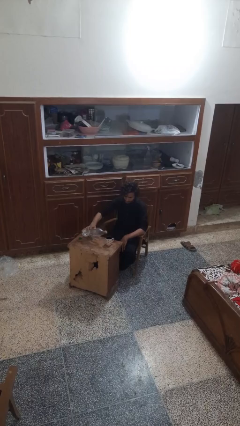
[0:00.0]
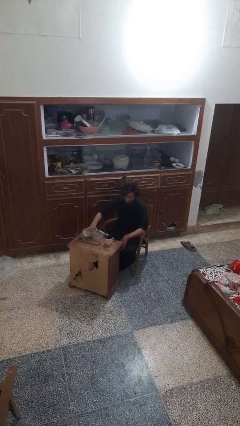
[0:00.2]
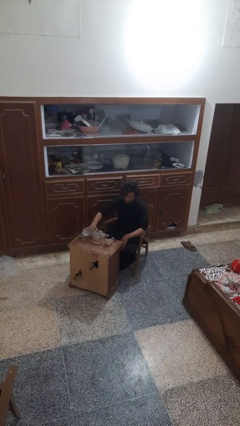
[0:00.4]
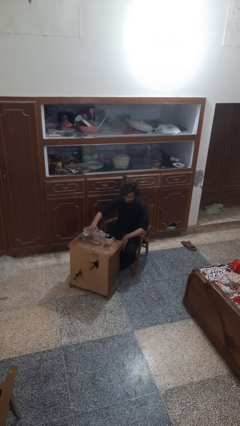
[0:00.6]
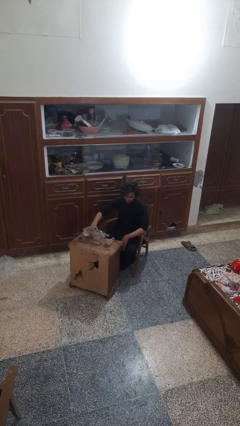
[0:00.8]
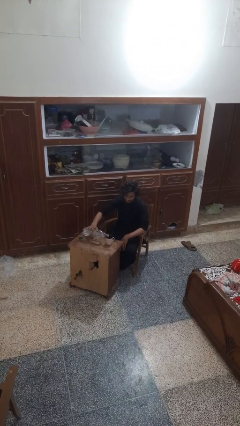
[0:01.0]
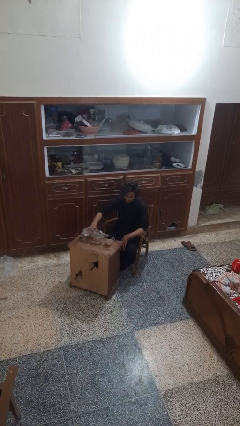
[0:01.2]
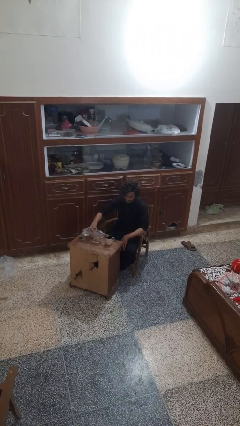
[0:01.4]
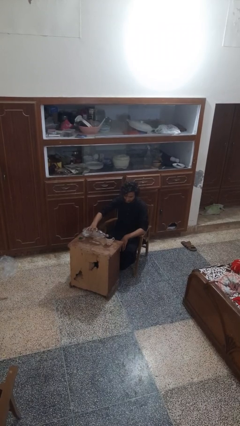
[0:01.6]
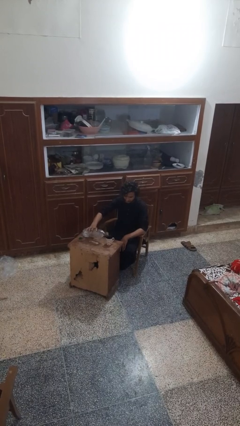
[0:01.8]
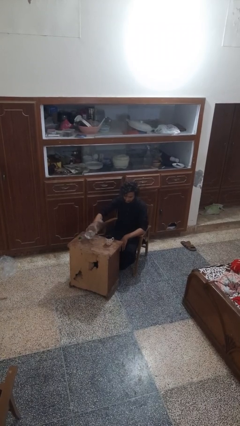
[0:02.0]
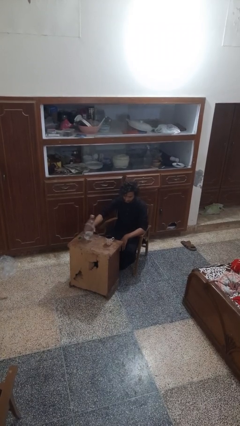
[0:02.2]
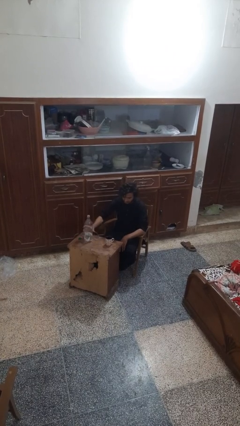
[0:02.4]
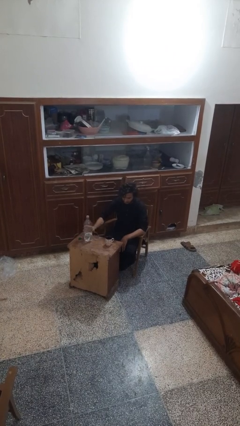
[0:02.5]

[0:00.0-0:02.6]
person pours liquid into cup

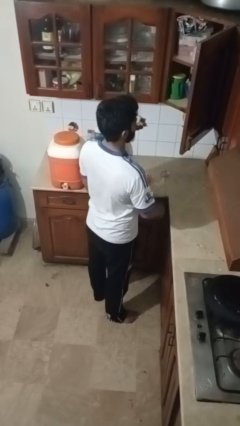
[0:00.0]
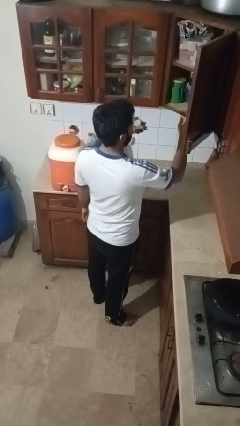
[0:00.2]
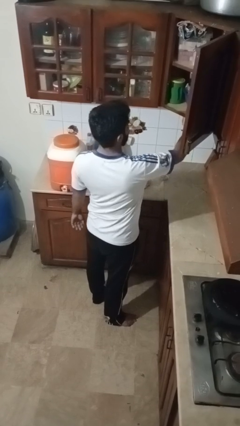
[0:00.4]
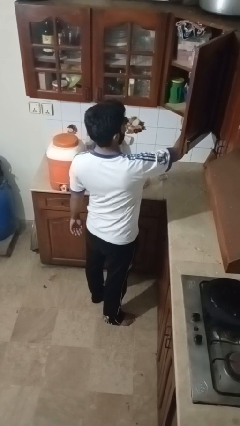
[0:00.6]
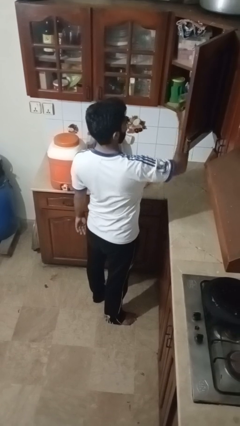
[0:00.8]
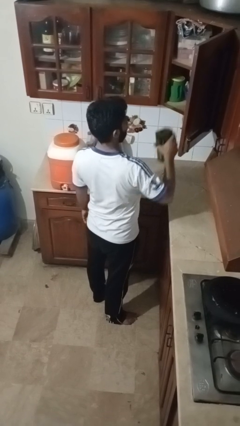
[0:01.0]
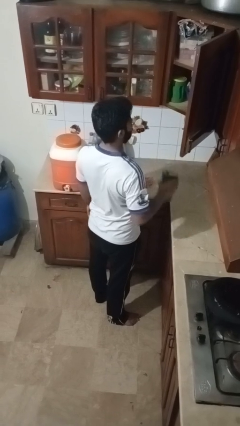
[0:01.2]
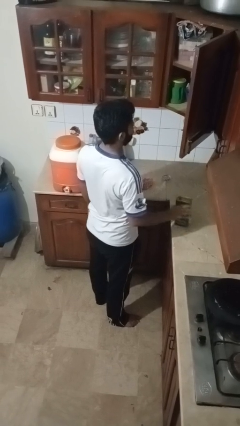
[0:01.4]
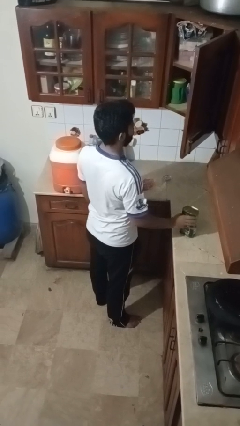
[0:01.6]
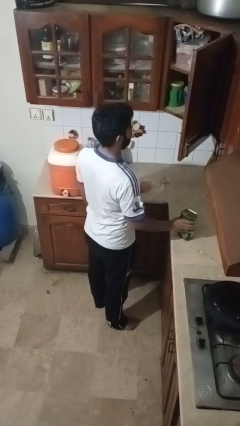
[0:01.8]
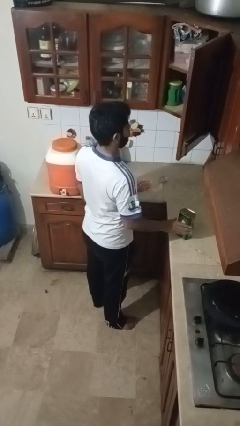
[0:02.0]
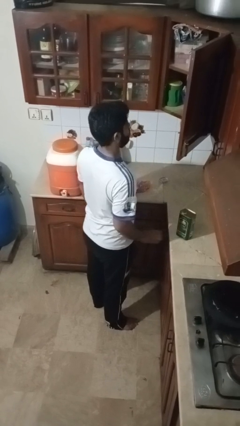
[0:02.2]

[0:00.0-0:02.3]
person takes object from cabinet

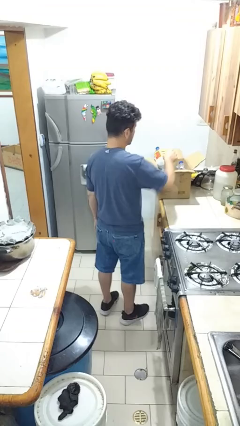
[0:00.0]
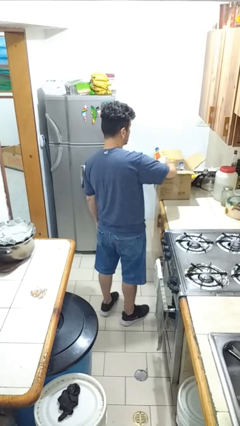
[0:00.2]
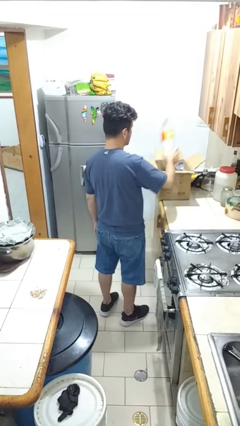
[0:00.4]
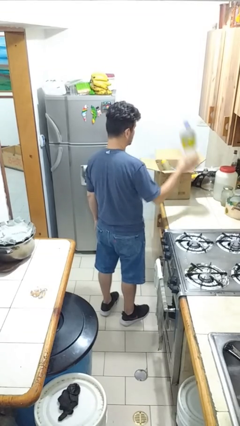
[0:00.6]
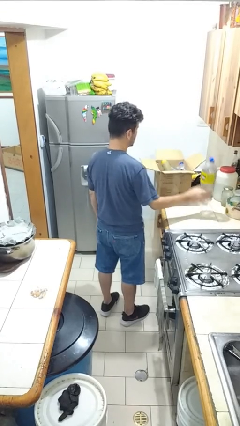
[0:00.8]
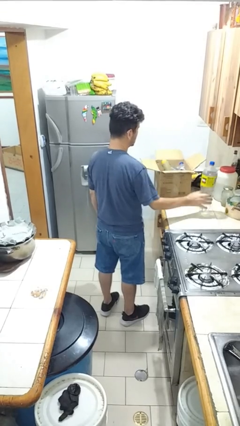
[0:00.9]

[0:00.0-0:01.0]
person takes object from box

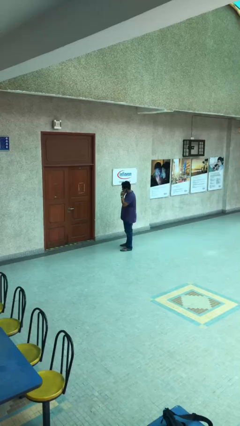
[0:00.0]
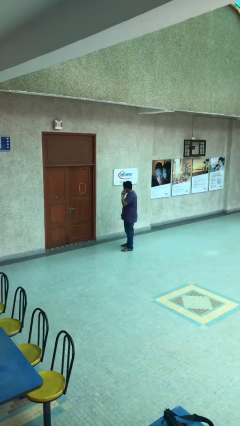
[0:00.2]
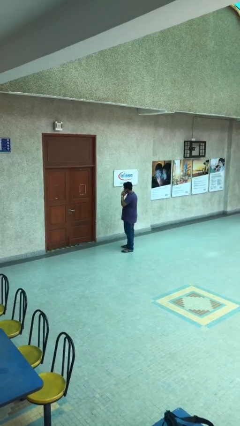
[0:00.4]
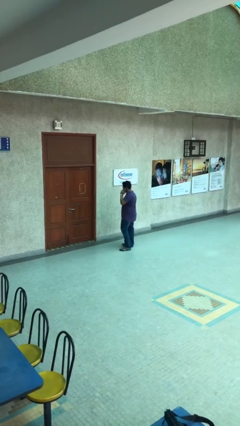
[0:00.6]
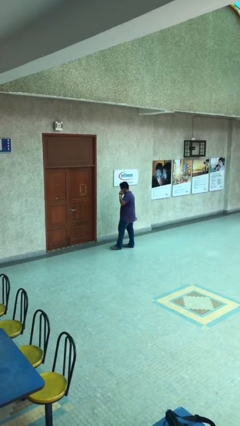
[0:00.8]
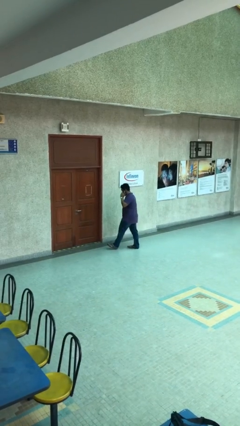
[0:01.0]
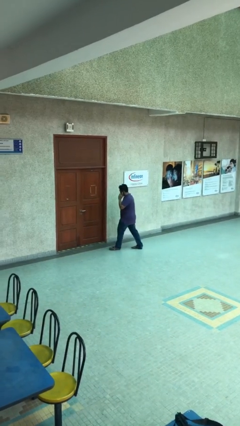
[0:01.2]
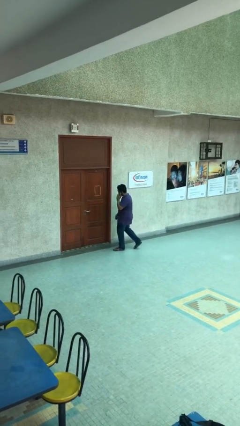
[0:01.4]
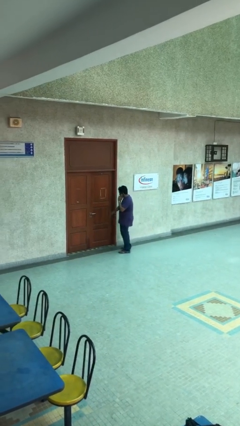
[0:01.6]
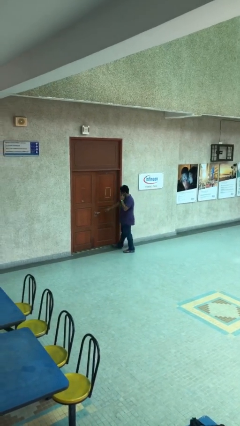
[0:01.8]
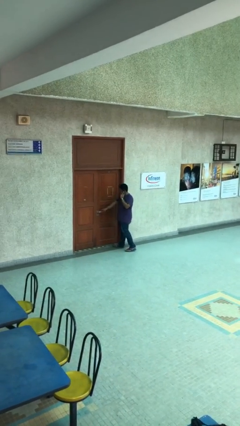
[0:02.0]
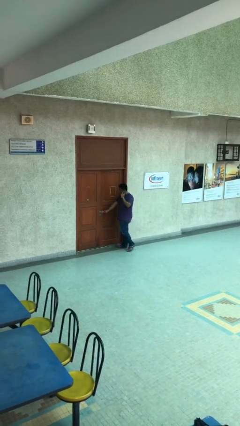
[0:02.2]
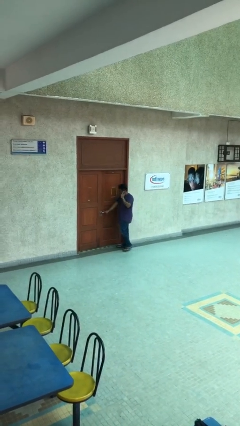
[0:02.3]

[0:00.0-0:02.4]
person opens facility door

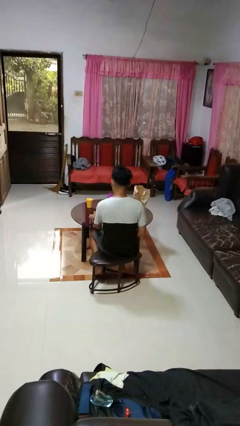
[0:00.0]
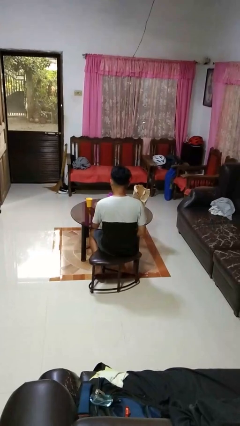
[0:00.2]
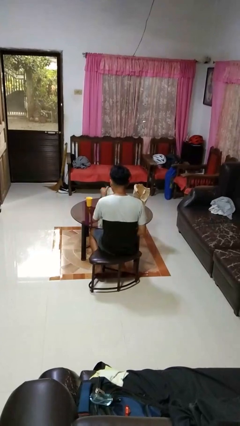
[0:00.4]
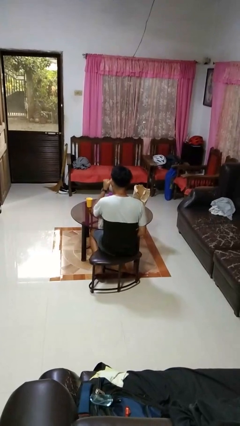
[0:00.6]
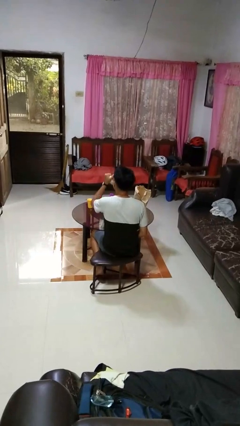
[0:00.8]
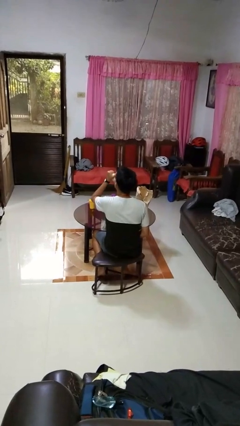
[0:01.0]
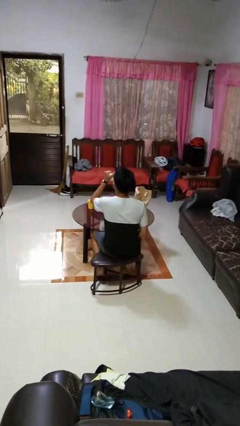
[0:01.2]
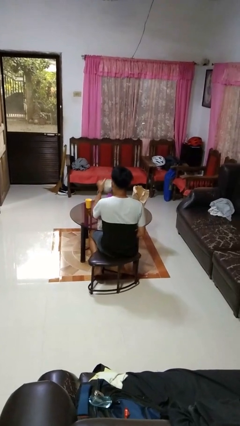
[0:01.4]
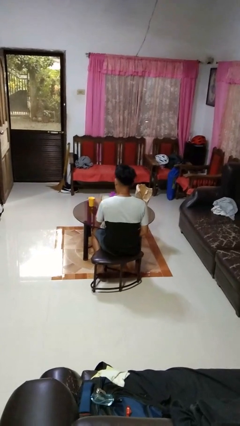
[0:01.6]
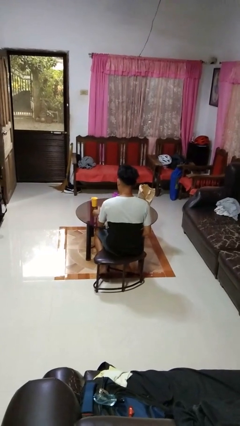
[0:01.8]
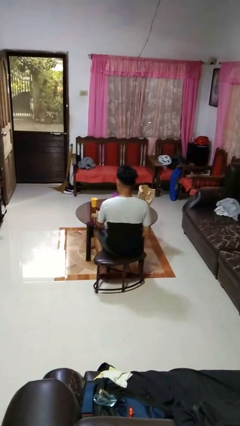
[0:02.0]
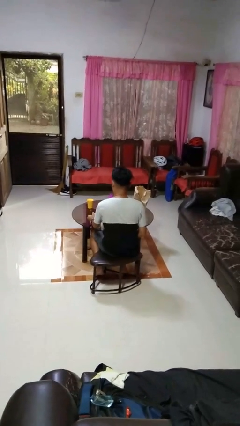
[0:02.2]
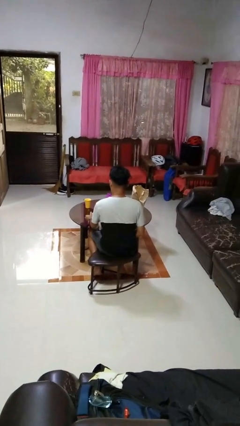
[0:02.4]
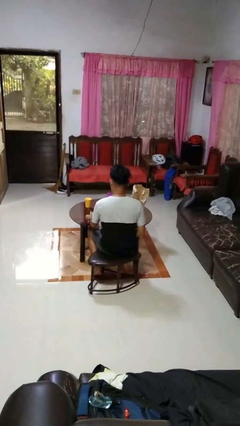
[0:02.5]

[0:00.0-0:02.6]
person drinks from mug

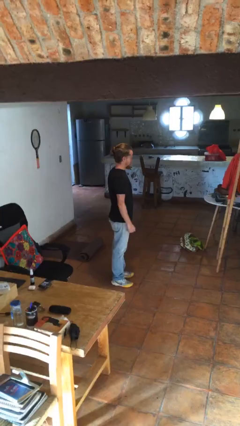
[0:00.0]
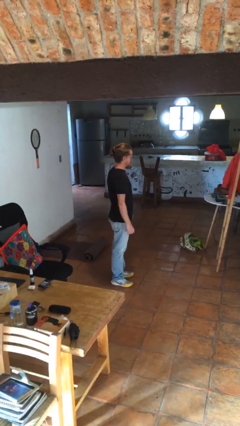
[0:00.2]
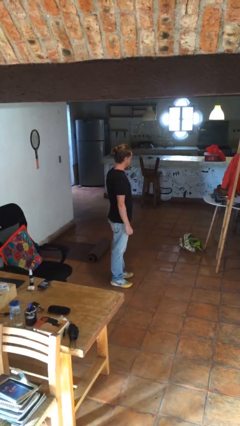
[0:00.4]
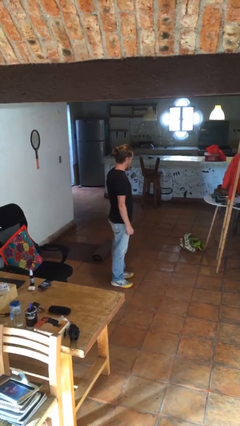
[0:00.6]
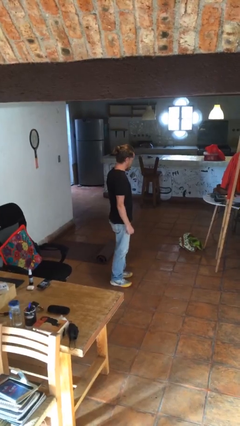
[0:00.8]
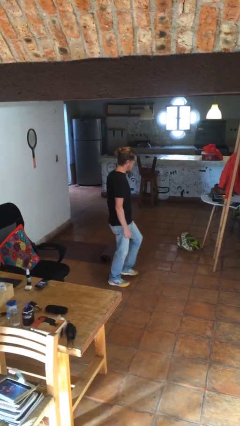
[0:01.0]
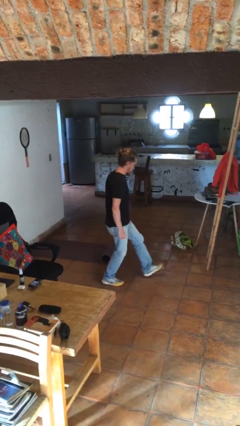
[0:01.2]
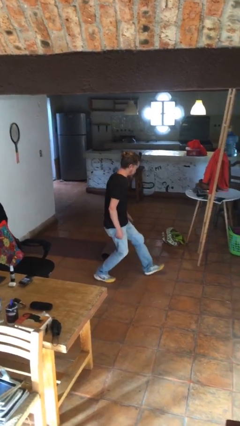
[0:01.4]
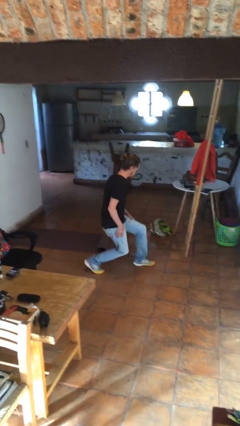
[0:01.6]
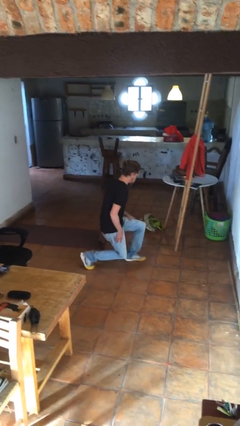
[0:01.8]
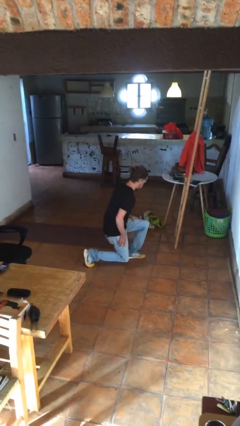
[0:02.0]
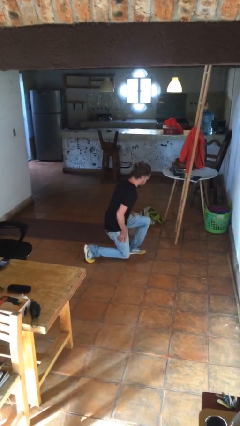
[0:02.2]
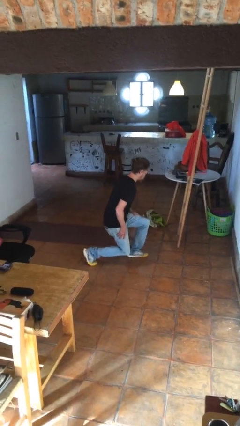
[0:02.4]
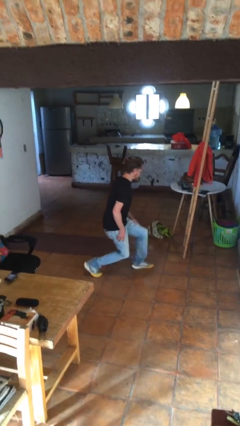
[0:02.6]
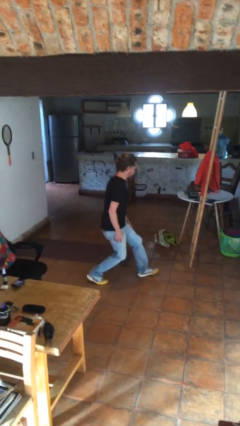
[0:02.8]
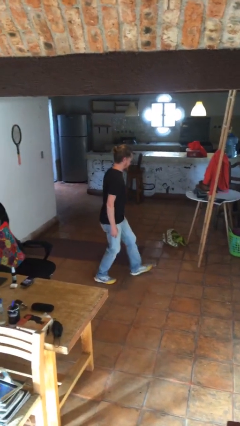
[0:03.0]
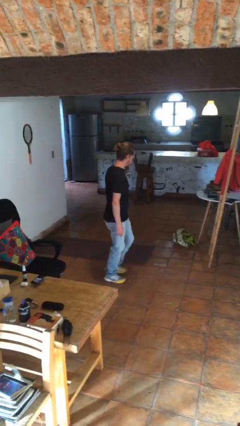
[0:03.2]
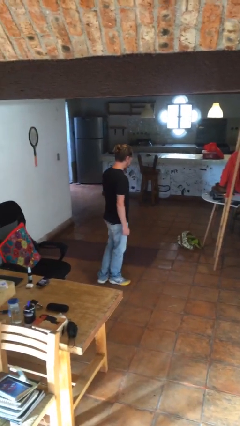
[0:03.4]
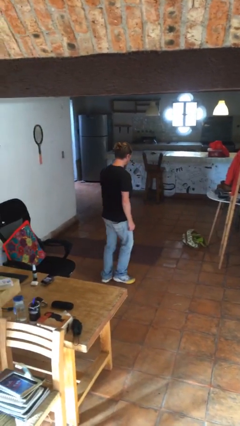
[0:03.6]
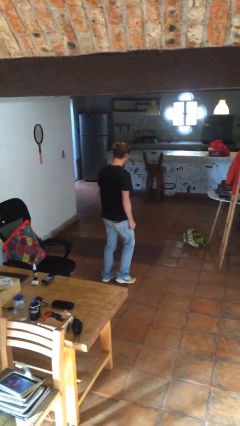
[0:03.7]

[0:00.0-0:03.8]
person exercises with lunges

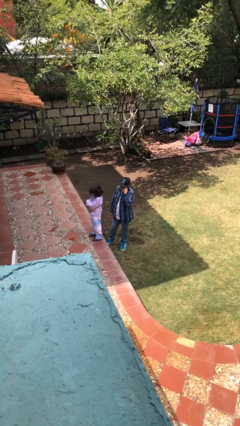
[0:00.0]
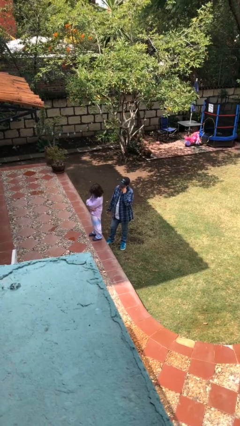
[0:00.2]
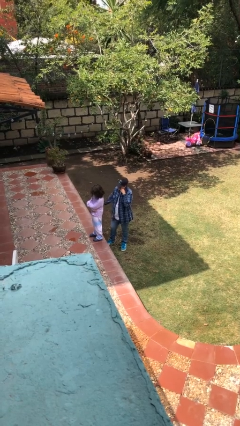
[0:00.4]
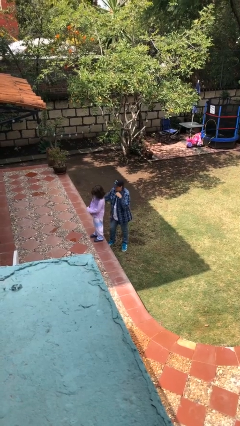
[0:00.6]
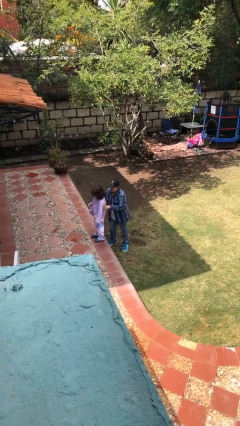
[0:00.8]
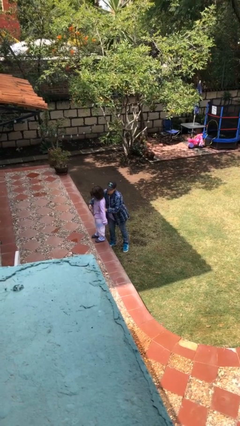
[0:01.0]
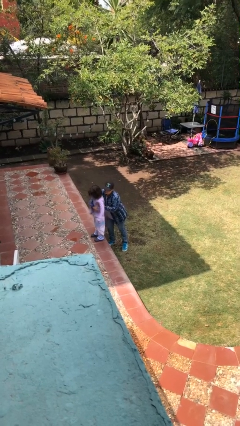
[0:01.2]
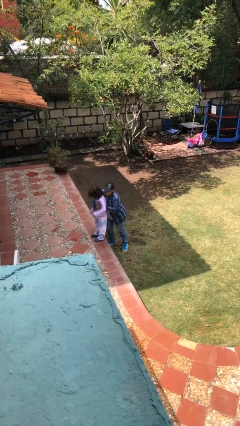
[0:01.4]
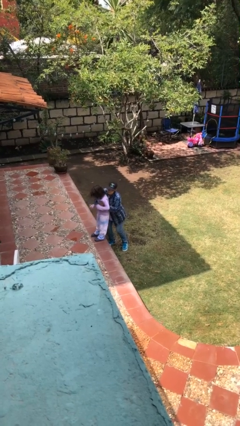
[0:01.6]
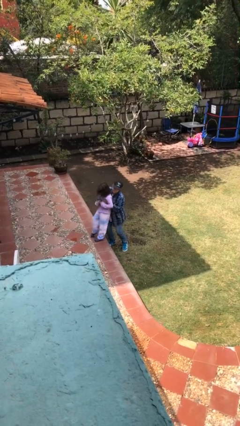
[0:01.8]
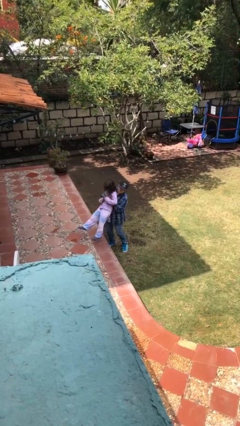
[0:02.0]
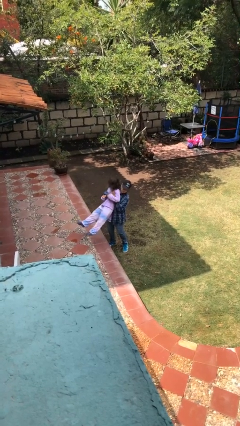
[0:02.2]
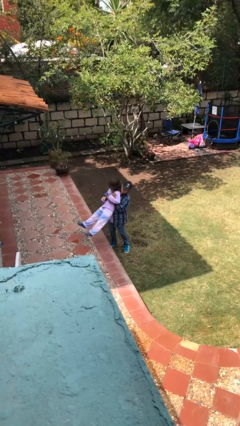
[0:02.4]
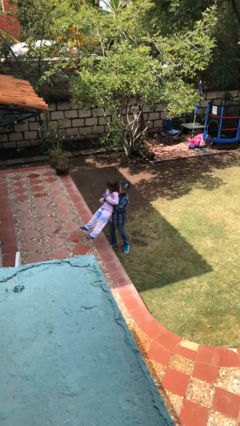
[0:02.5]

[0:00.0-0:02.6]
person picks up person
